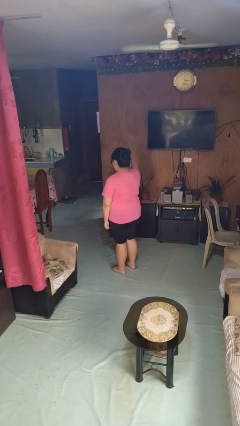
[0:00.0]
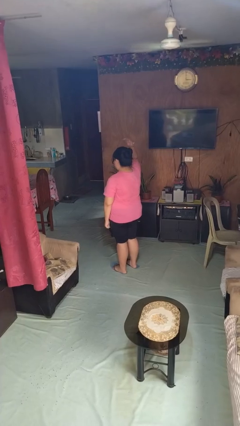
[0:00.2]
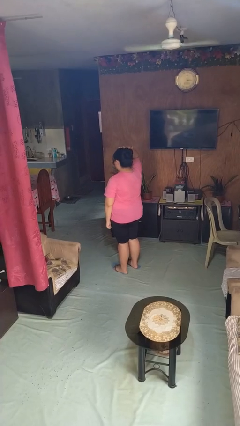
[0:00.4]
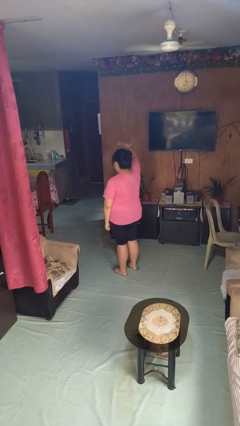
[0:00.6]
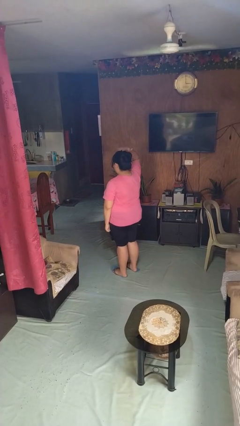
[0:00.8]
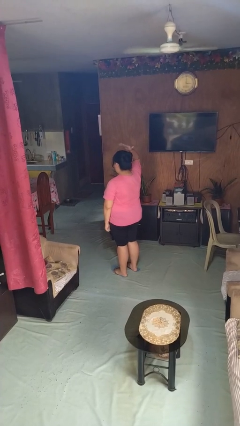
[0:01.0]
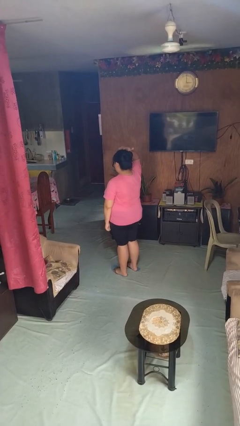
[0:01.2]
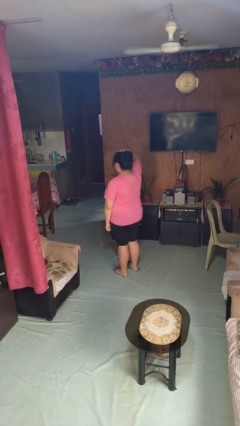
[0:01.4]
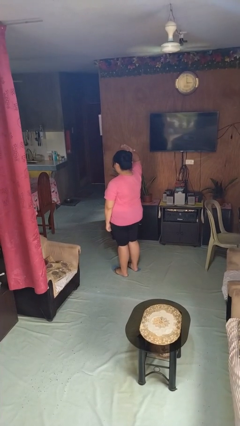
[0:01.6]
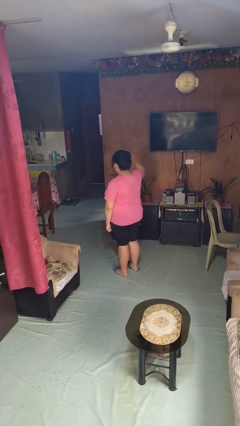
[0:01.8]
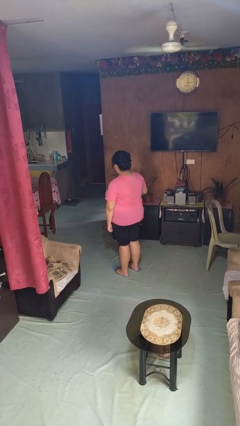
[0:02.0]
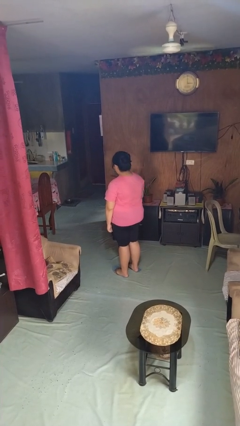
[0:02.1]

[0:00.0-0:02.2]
person pats head

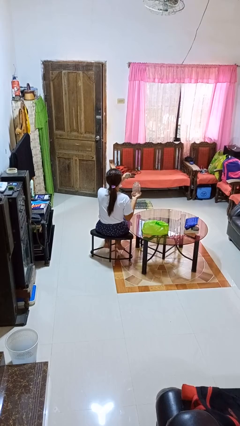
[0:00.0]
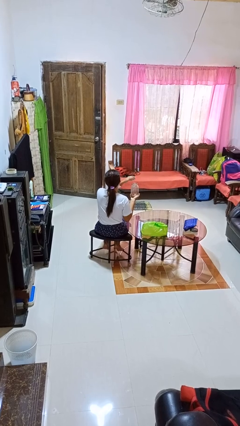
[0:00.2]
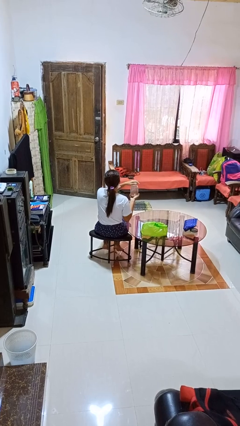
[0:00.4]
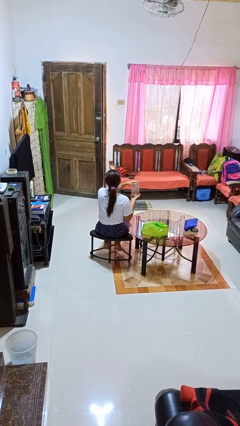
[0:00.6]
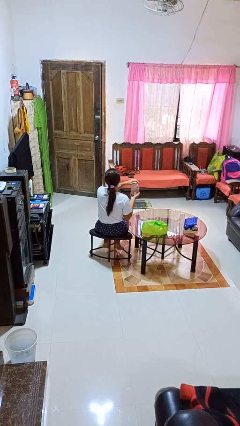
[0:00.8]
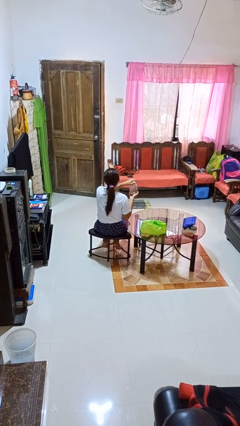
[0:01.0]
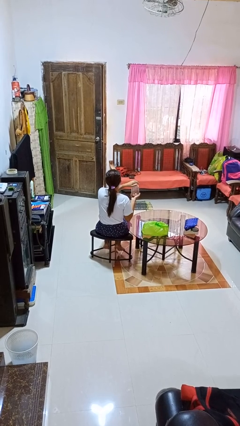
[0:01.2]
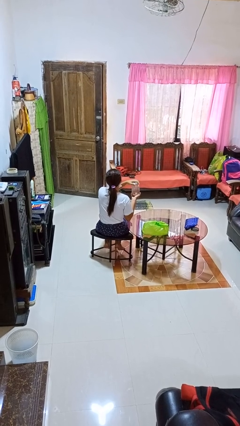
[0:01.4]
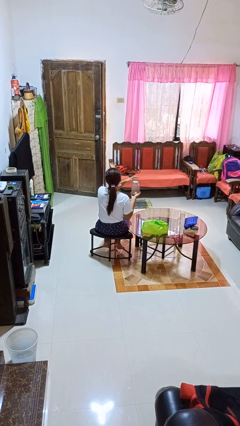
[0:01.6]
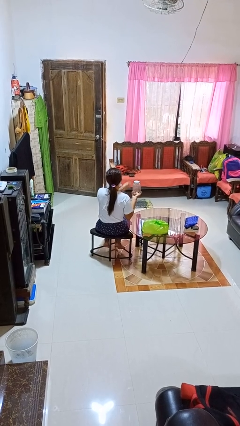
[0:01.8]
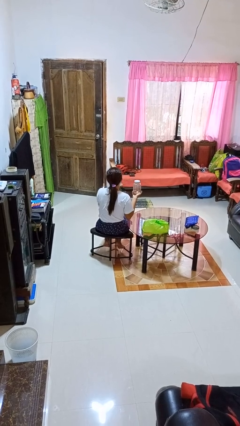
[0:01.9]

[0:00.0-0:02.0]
person closes jar

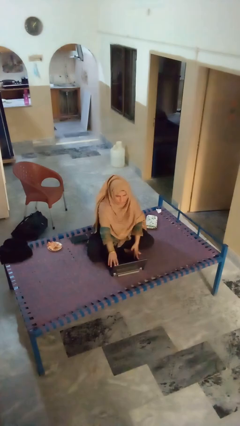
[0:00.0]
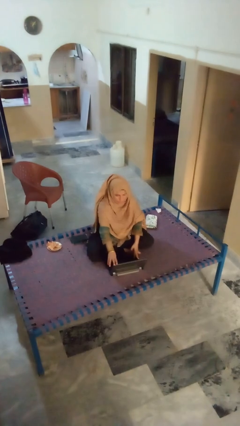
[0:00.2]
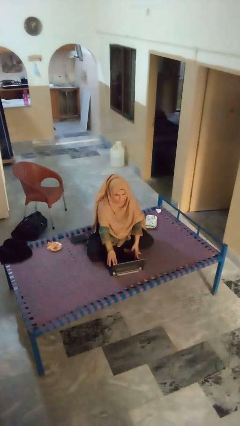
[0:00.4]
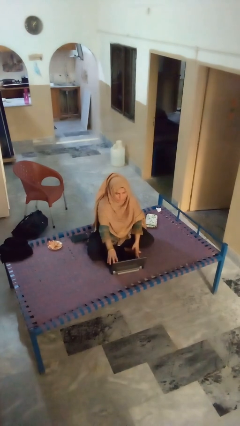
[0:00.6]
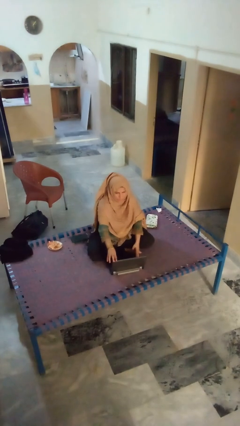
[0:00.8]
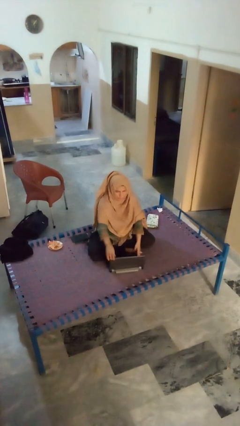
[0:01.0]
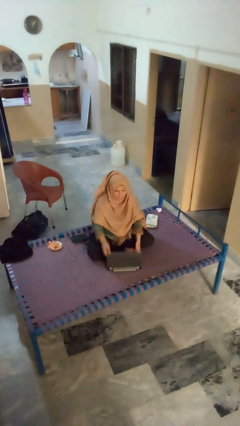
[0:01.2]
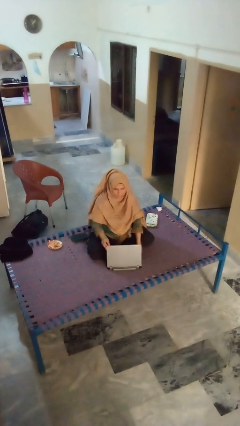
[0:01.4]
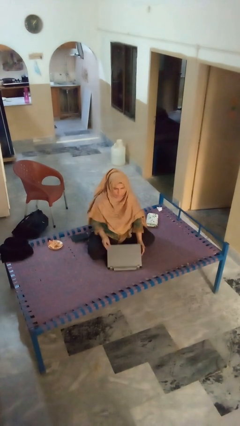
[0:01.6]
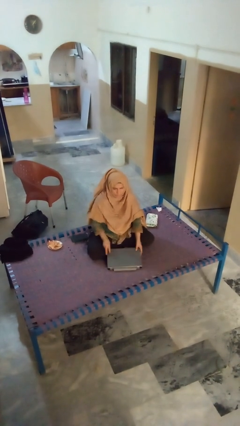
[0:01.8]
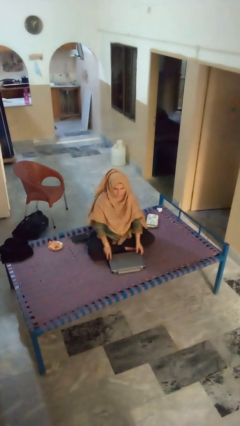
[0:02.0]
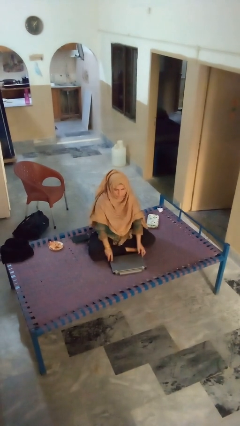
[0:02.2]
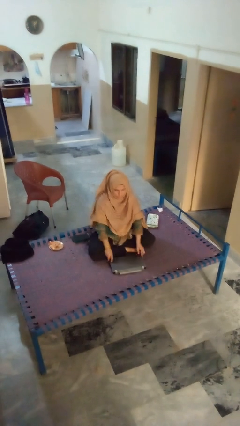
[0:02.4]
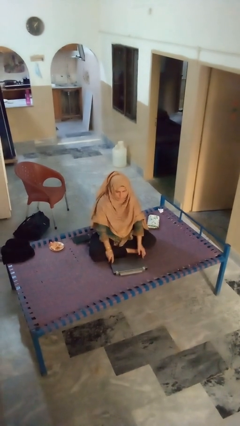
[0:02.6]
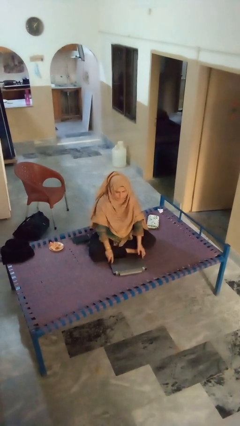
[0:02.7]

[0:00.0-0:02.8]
person closes laptop

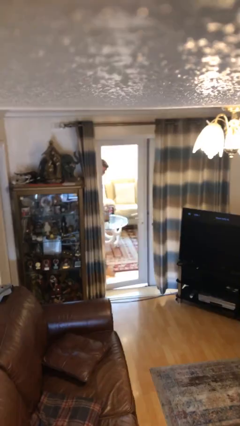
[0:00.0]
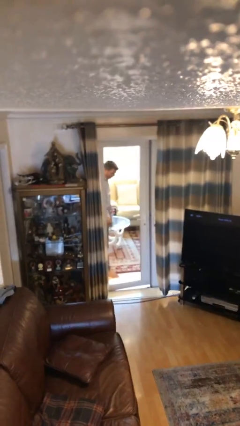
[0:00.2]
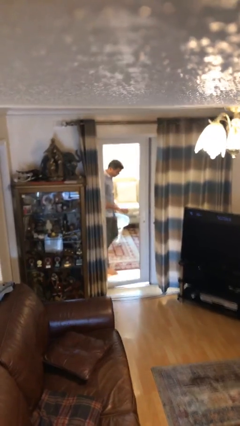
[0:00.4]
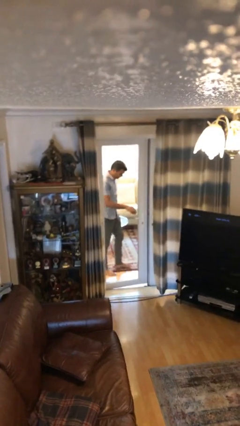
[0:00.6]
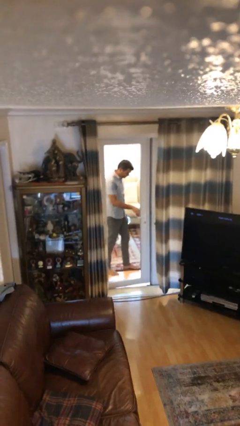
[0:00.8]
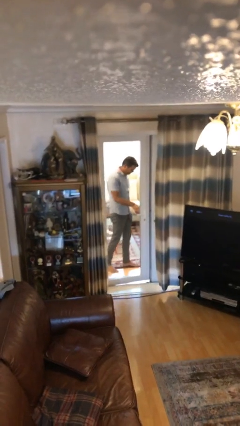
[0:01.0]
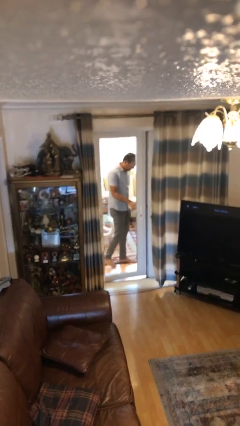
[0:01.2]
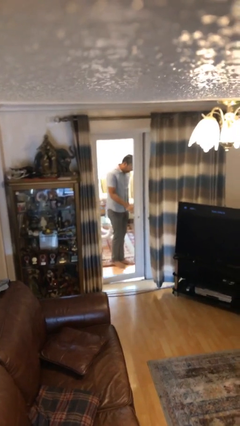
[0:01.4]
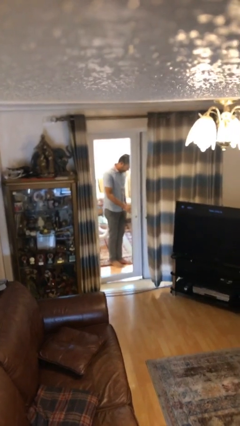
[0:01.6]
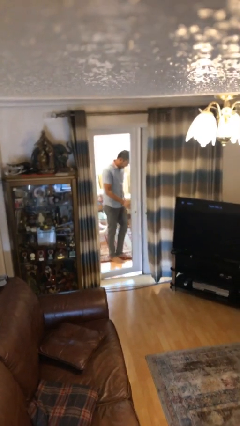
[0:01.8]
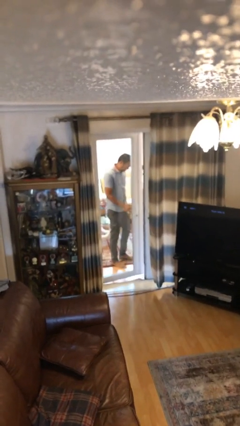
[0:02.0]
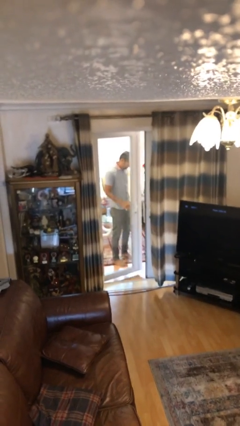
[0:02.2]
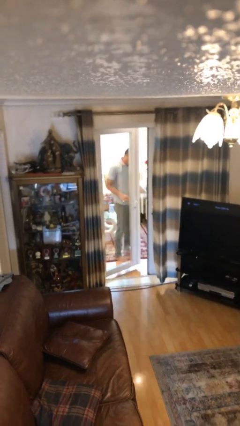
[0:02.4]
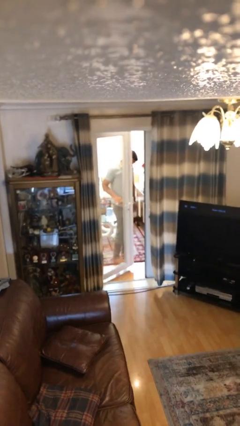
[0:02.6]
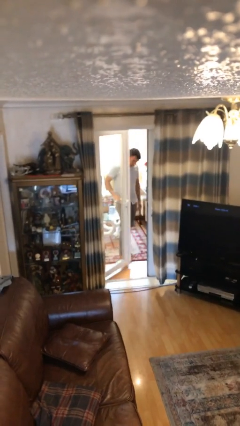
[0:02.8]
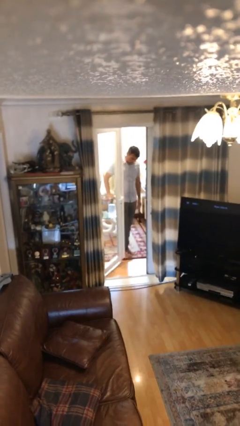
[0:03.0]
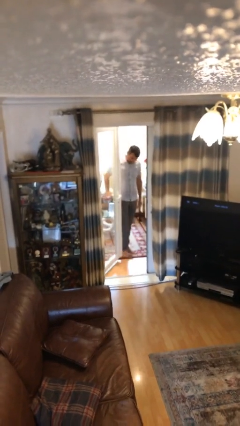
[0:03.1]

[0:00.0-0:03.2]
person opens facility door

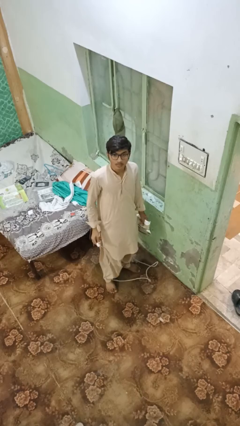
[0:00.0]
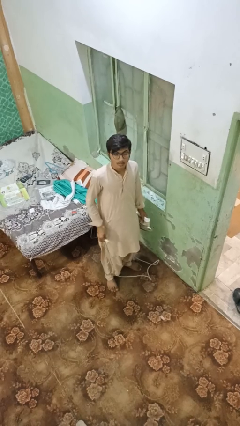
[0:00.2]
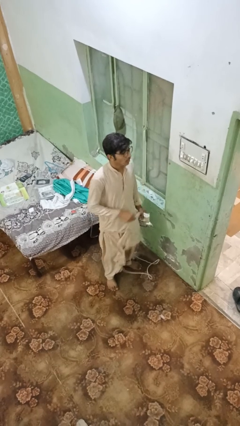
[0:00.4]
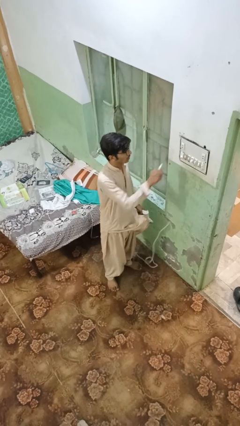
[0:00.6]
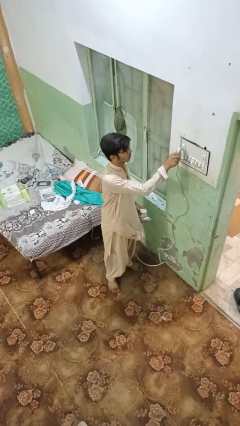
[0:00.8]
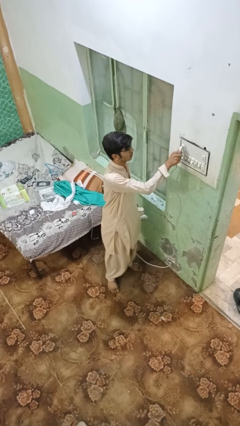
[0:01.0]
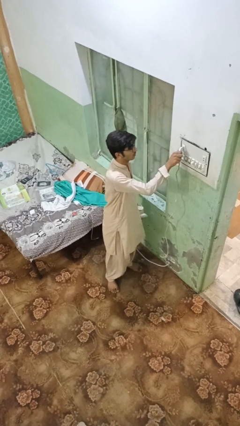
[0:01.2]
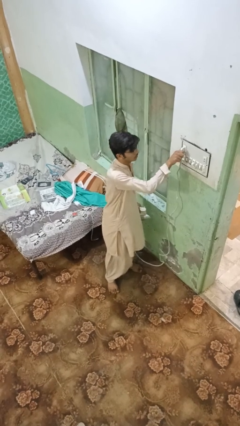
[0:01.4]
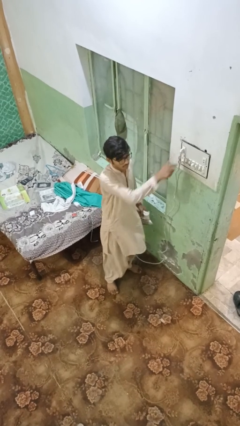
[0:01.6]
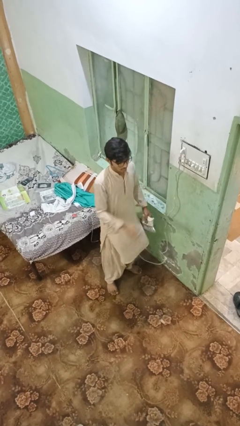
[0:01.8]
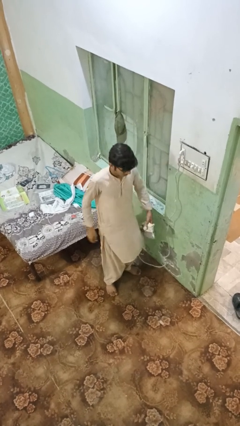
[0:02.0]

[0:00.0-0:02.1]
person plugs into electrical socket

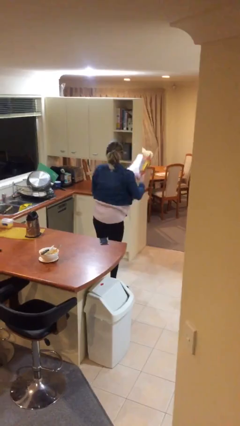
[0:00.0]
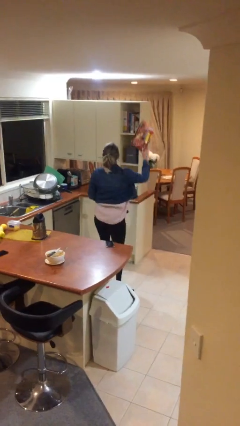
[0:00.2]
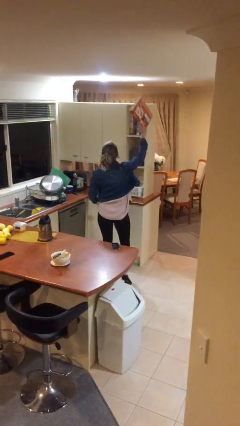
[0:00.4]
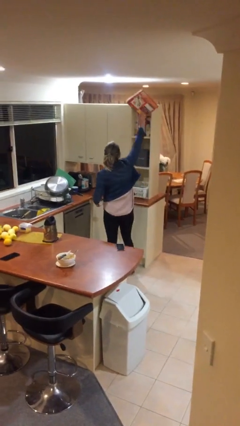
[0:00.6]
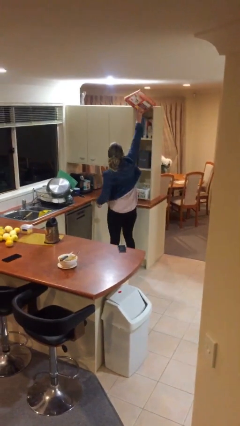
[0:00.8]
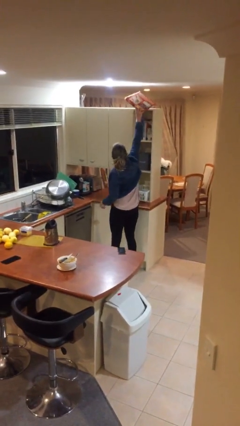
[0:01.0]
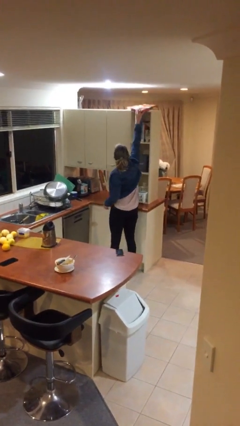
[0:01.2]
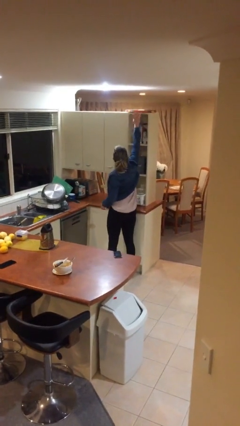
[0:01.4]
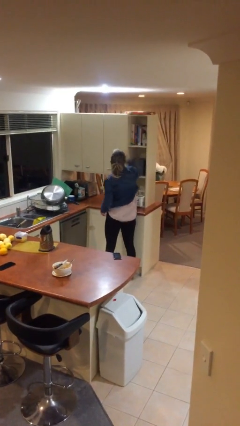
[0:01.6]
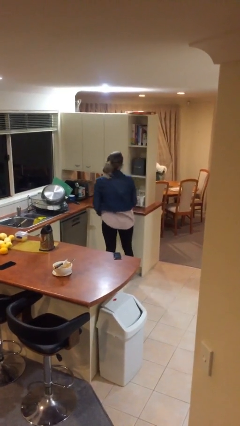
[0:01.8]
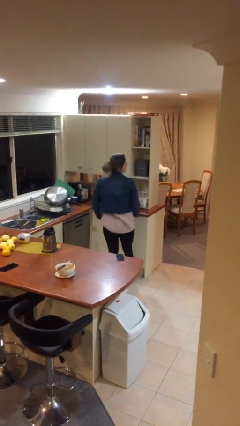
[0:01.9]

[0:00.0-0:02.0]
person puts down object on shelf

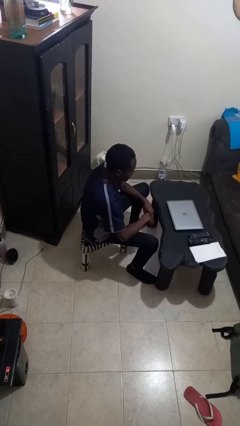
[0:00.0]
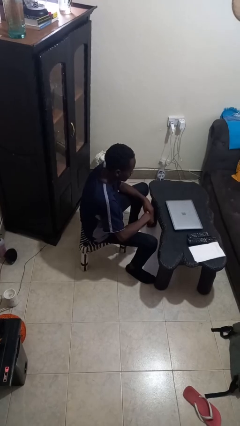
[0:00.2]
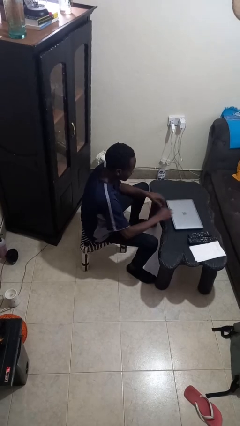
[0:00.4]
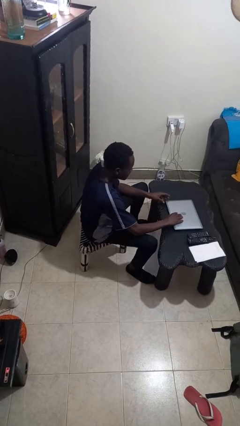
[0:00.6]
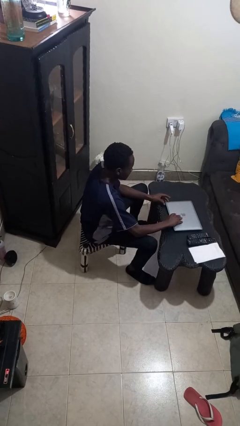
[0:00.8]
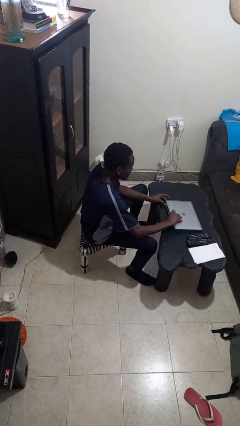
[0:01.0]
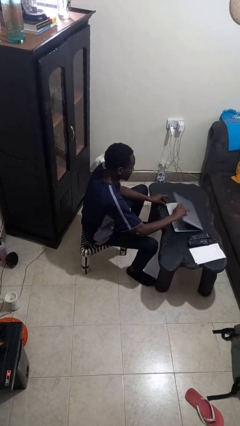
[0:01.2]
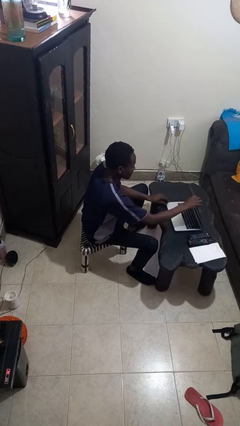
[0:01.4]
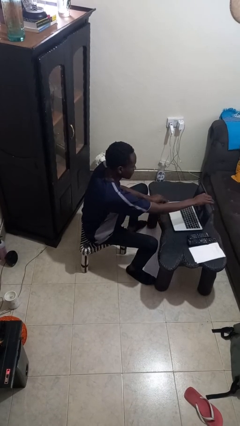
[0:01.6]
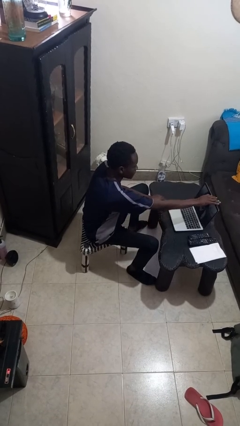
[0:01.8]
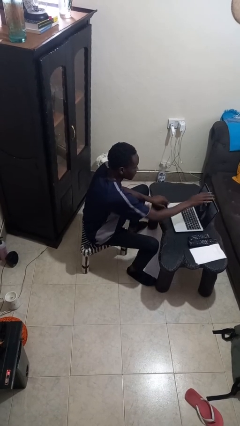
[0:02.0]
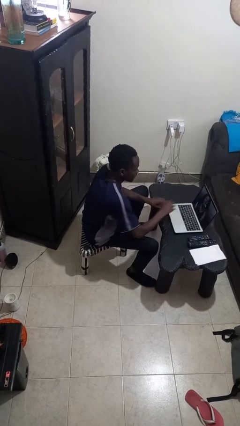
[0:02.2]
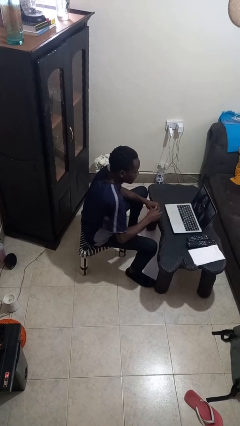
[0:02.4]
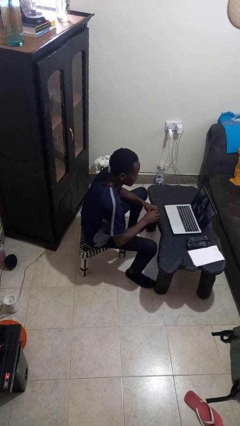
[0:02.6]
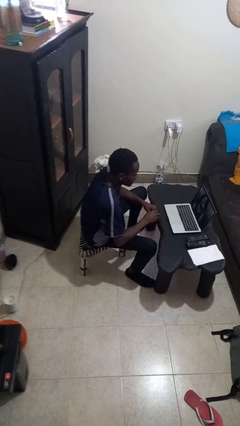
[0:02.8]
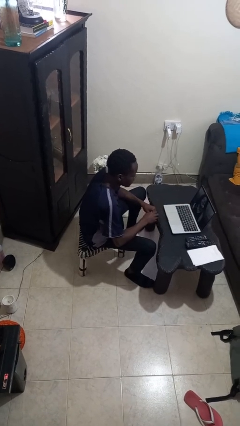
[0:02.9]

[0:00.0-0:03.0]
person opens laptop
